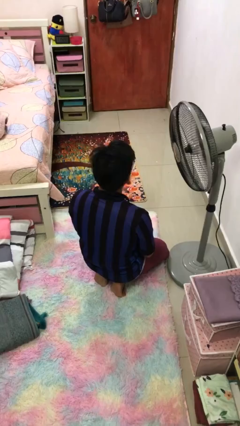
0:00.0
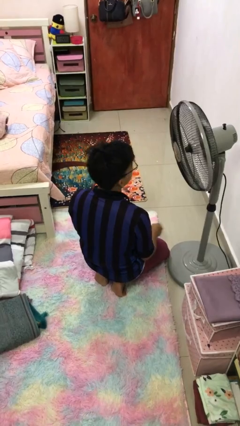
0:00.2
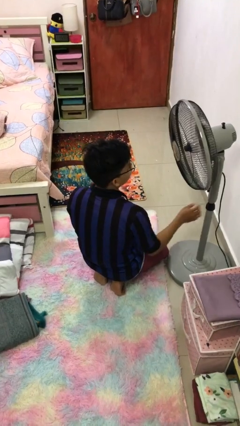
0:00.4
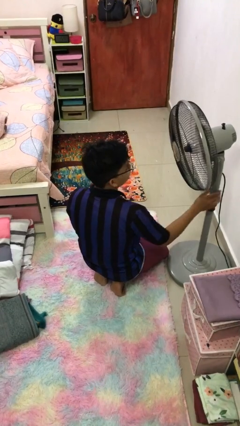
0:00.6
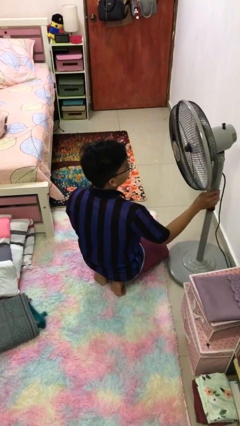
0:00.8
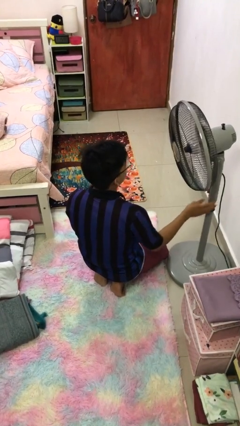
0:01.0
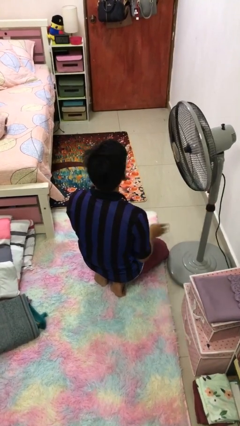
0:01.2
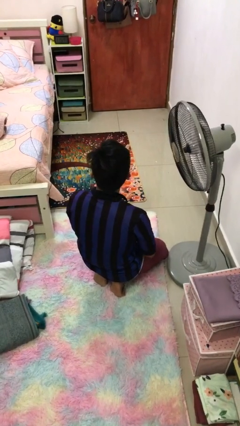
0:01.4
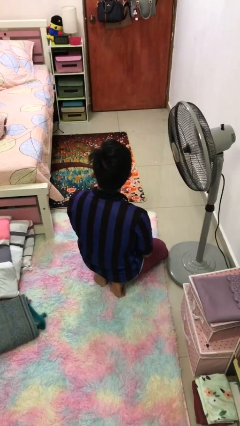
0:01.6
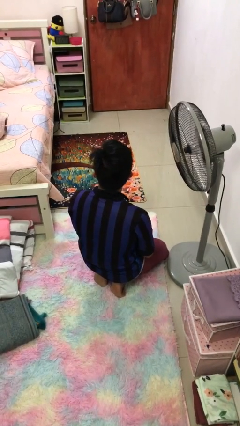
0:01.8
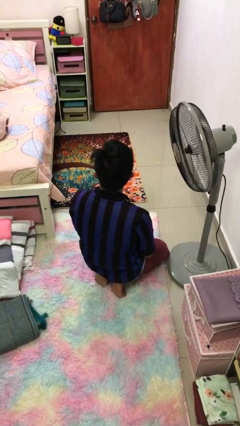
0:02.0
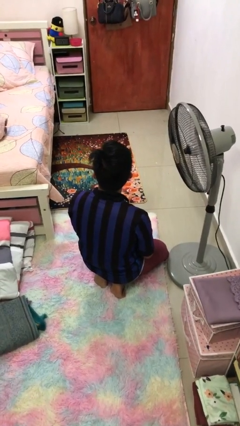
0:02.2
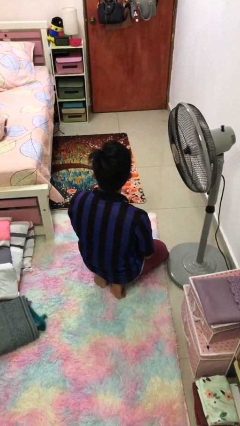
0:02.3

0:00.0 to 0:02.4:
person turns on fan

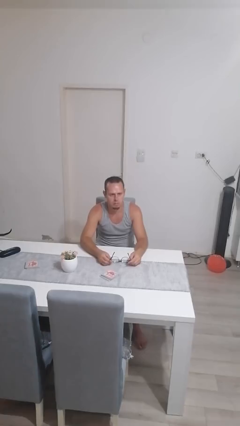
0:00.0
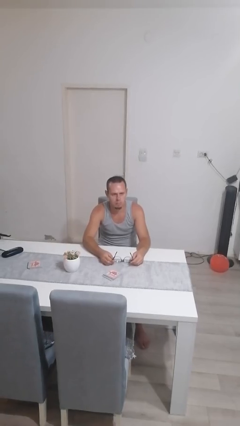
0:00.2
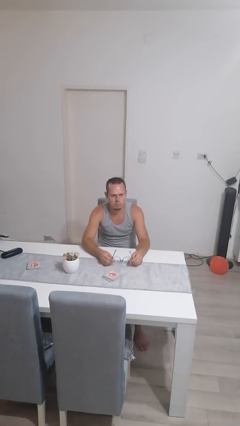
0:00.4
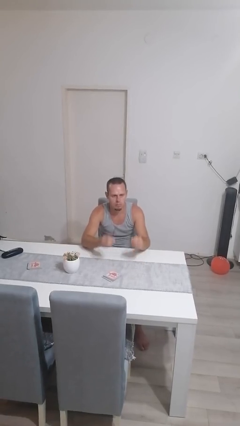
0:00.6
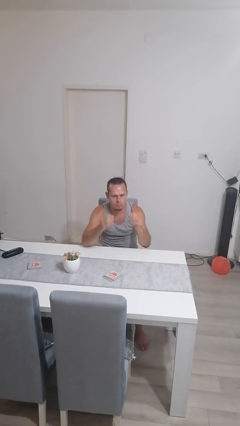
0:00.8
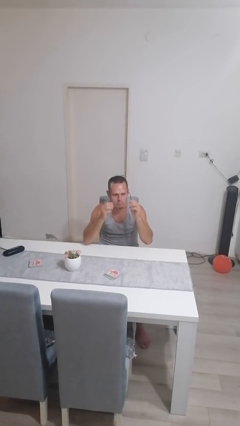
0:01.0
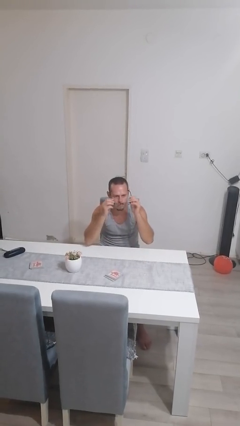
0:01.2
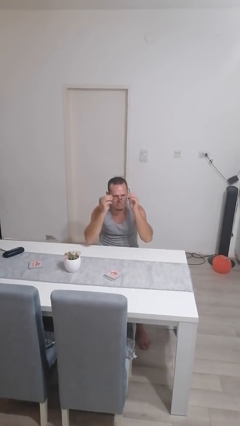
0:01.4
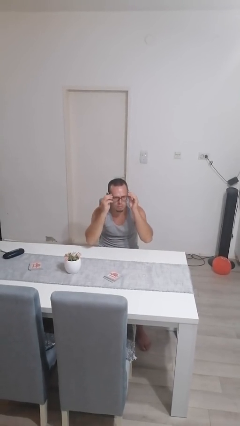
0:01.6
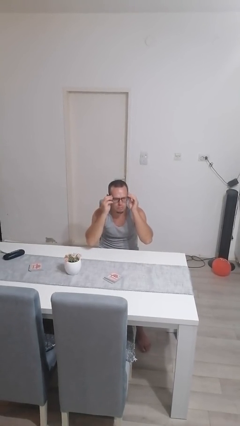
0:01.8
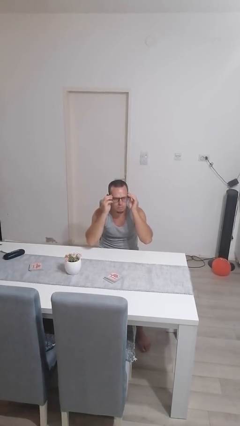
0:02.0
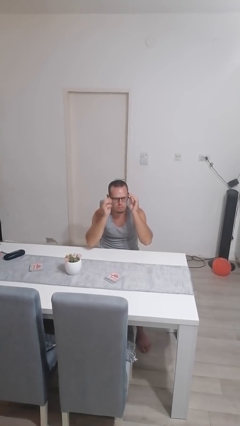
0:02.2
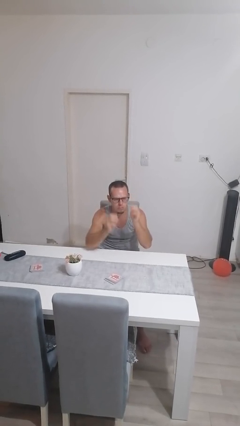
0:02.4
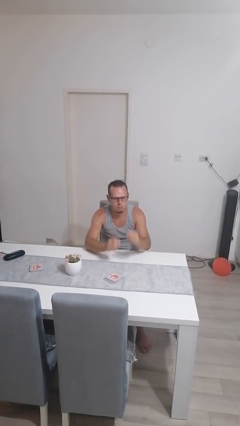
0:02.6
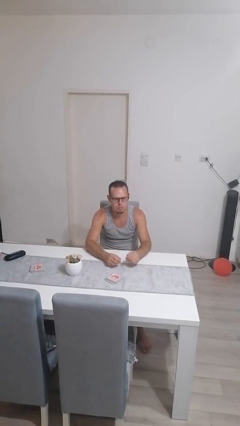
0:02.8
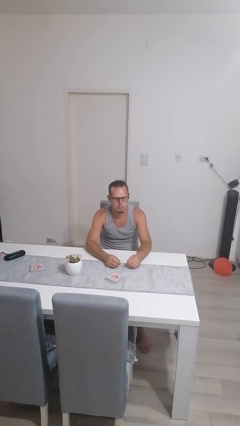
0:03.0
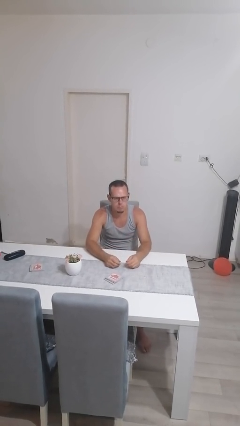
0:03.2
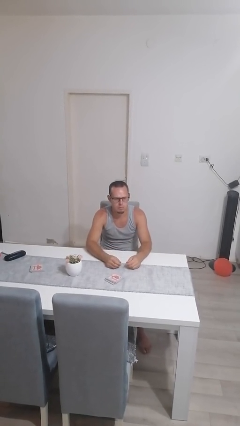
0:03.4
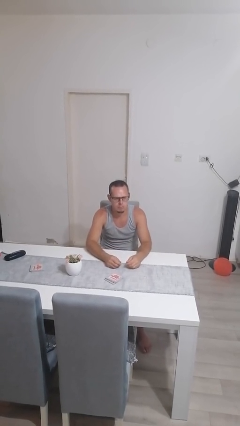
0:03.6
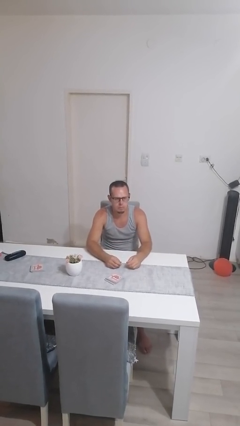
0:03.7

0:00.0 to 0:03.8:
person puts on glasses

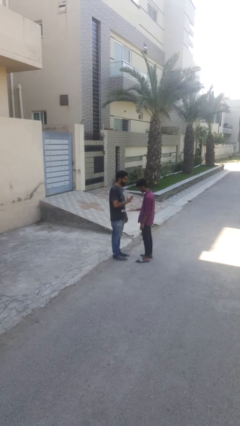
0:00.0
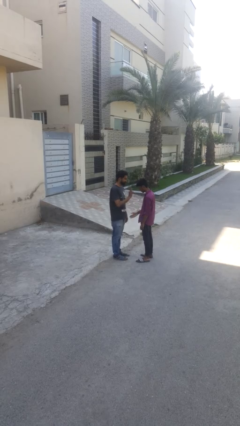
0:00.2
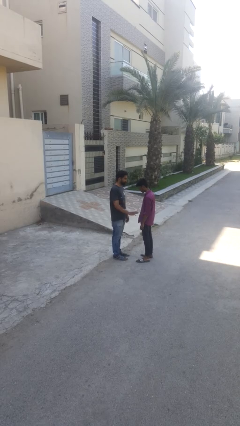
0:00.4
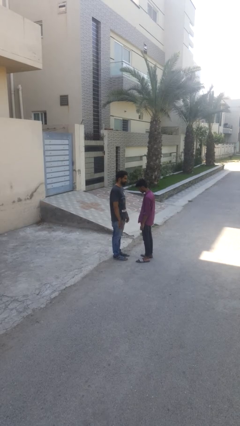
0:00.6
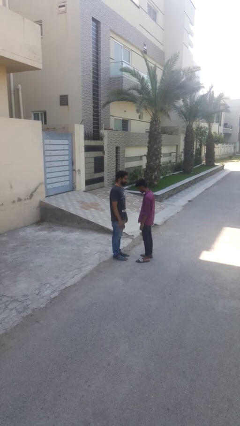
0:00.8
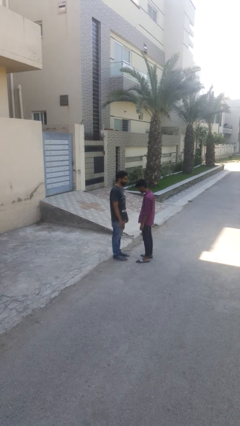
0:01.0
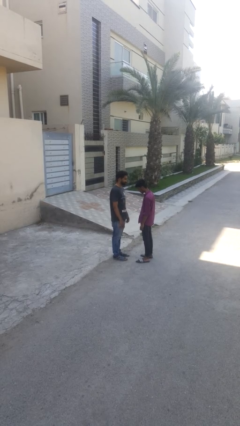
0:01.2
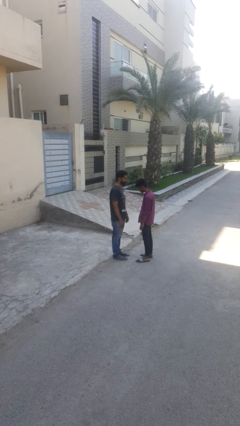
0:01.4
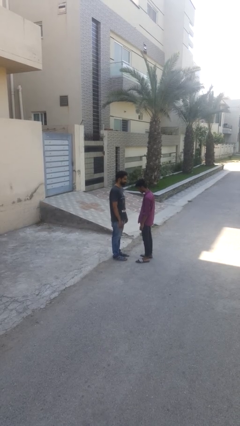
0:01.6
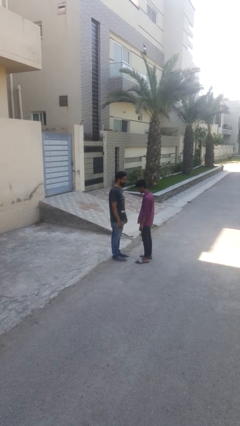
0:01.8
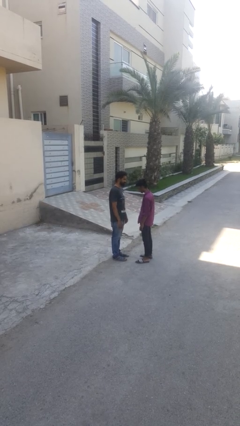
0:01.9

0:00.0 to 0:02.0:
person highfives hand

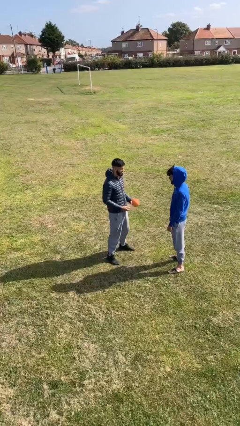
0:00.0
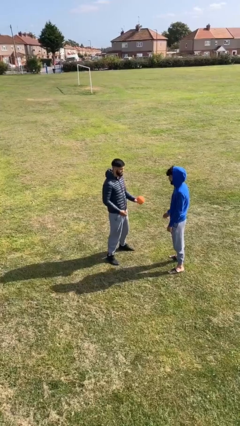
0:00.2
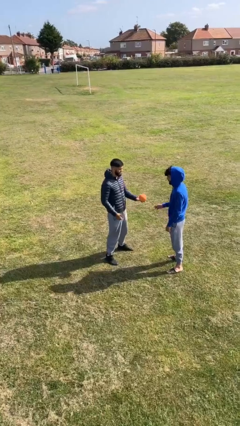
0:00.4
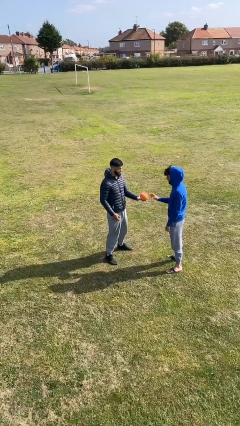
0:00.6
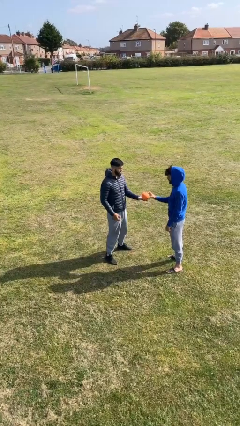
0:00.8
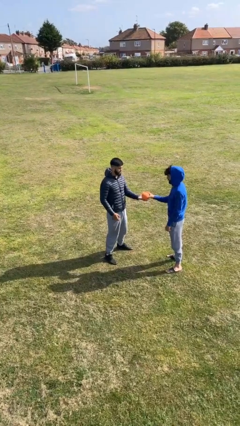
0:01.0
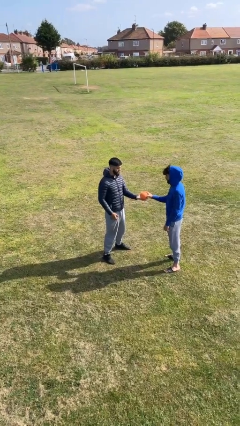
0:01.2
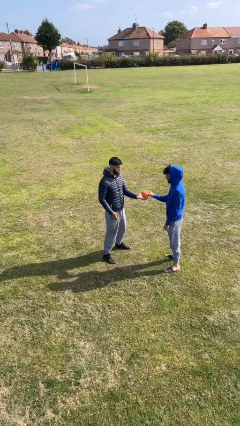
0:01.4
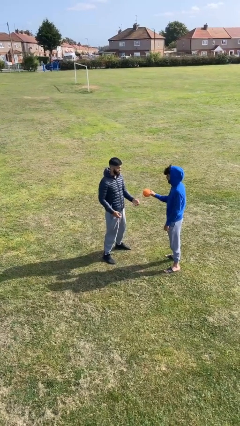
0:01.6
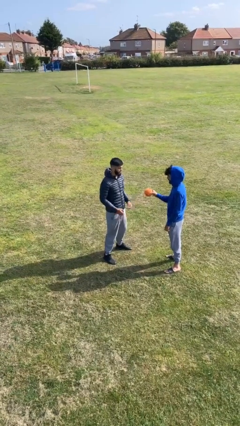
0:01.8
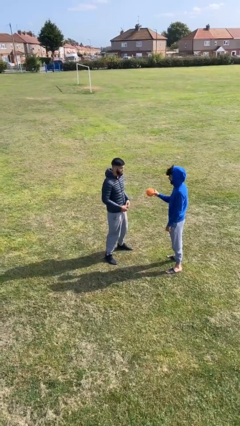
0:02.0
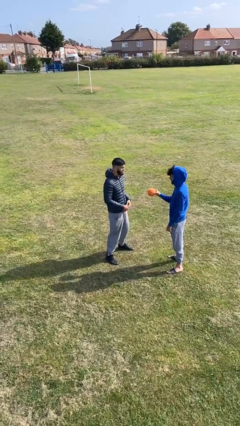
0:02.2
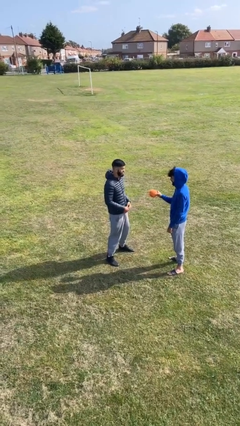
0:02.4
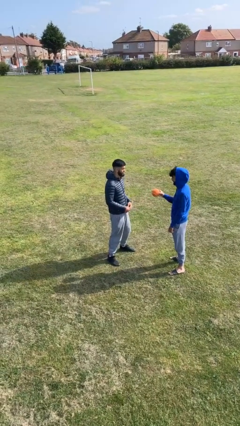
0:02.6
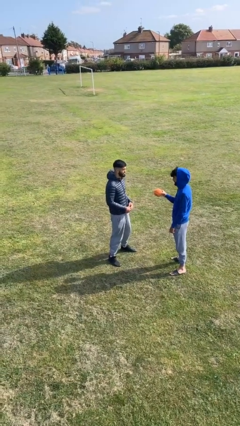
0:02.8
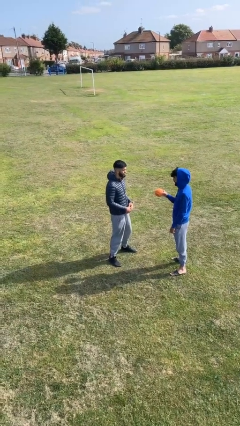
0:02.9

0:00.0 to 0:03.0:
person transfers object to person

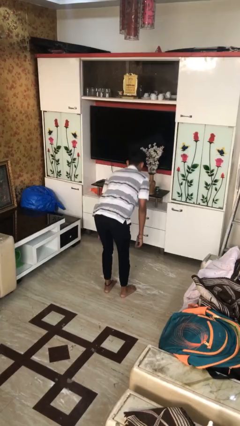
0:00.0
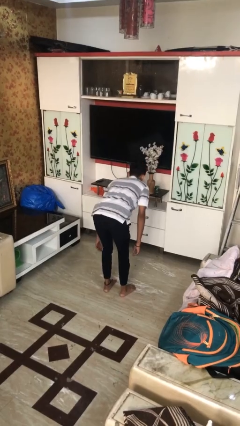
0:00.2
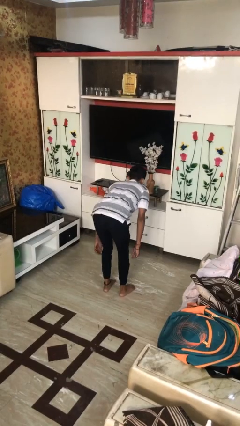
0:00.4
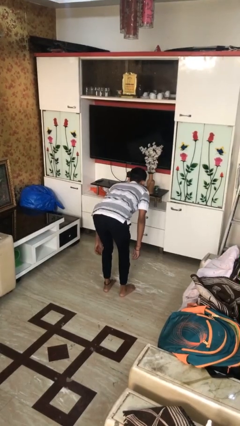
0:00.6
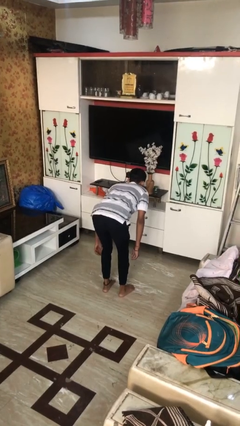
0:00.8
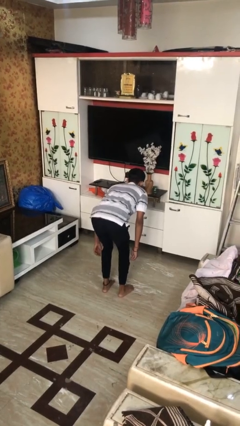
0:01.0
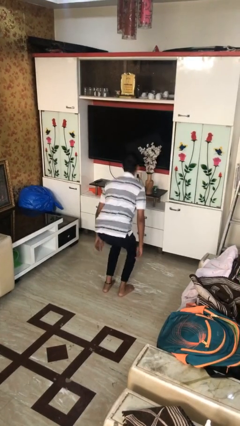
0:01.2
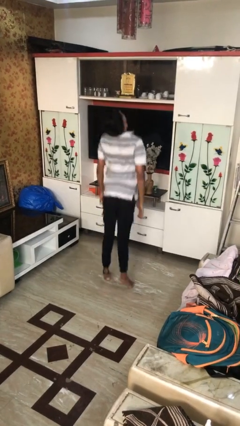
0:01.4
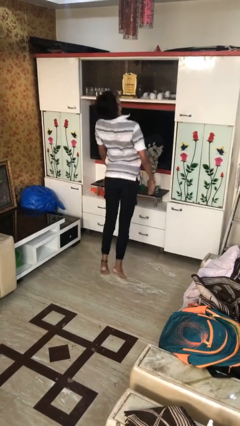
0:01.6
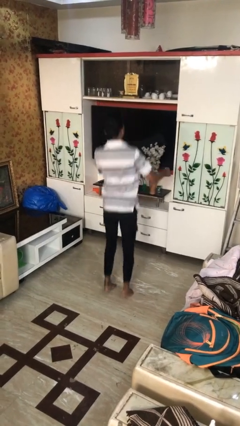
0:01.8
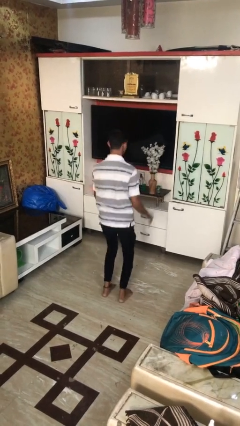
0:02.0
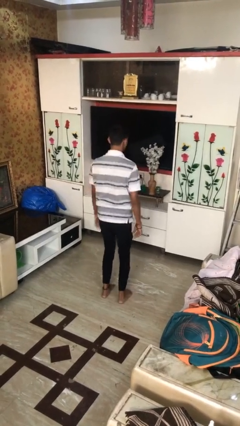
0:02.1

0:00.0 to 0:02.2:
person somersaults

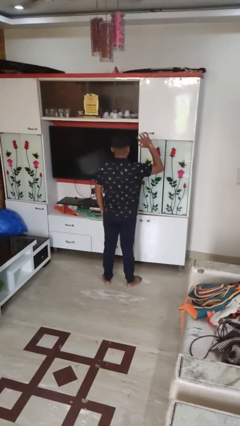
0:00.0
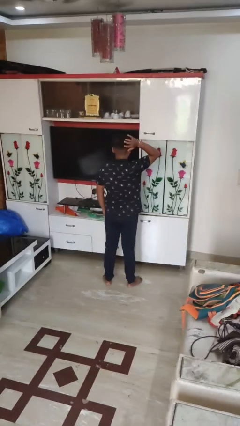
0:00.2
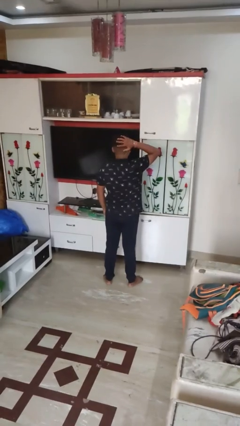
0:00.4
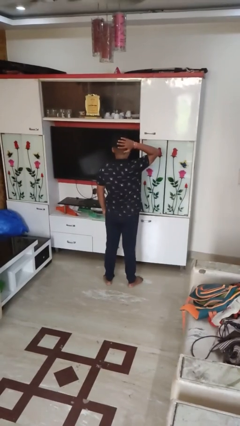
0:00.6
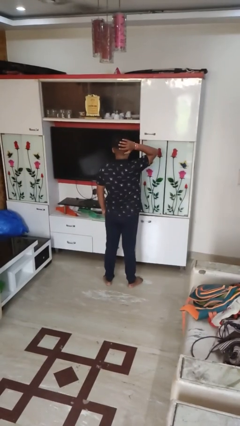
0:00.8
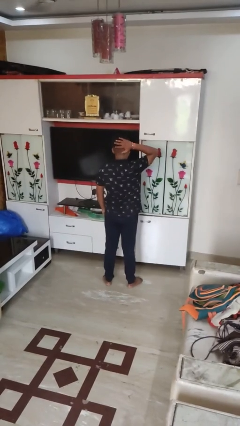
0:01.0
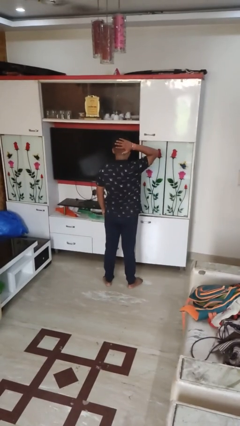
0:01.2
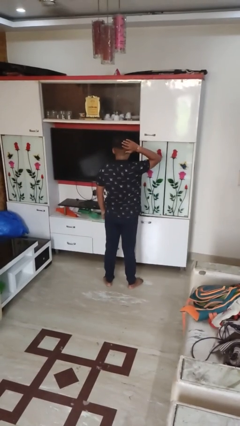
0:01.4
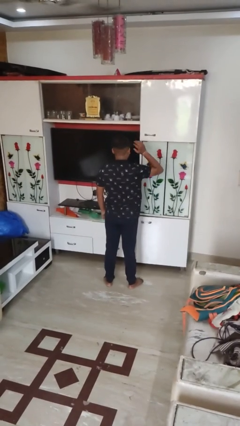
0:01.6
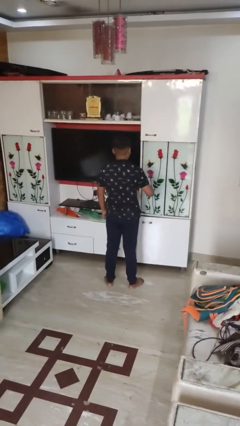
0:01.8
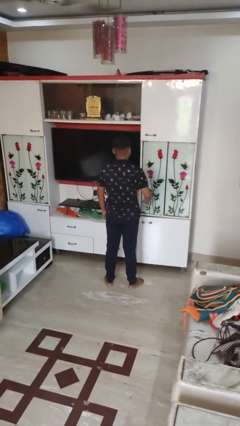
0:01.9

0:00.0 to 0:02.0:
person pats head

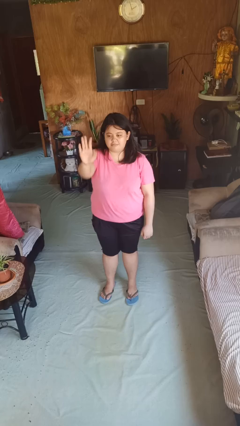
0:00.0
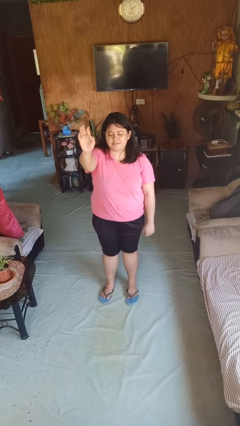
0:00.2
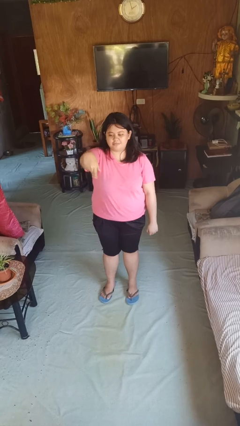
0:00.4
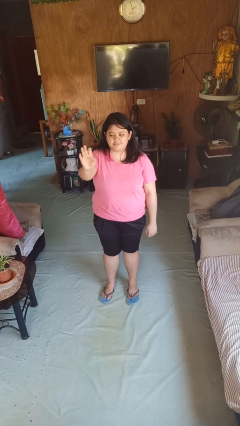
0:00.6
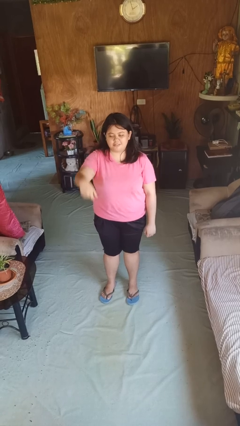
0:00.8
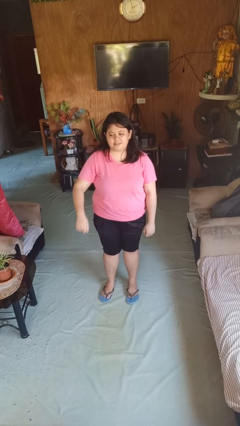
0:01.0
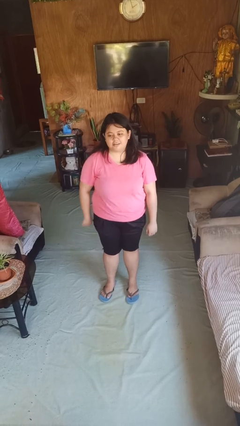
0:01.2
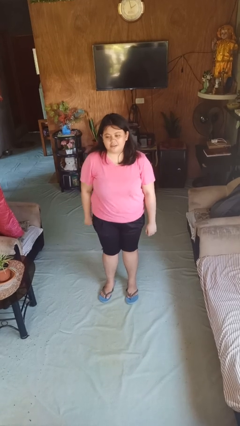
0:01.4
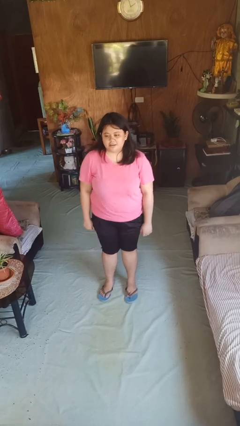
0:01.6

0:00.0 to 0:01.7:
person gestures come here
